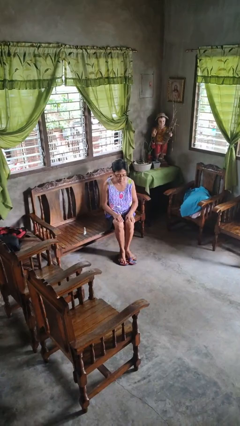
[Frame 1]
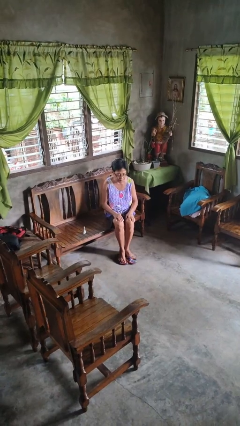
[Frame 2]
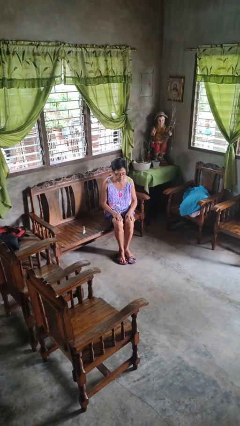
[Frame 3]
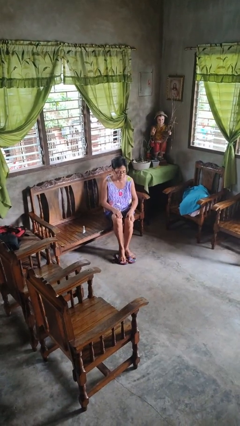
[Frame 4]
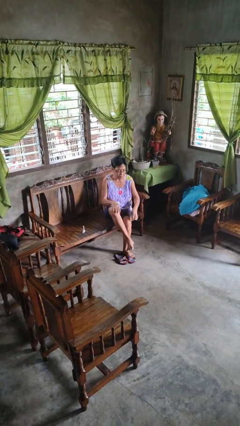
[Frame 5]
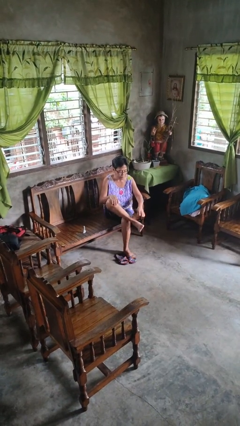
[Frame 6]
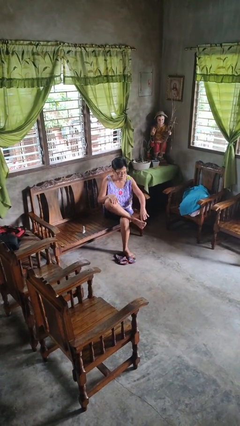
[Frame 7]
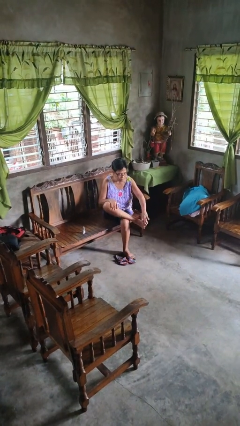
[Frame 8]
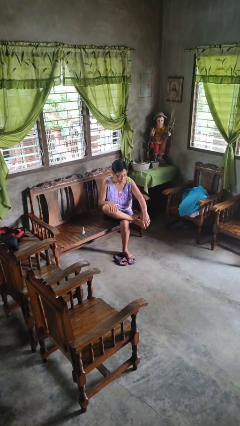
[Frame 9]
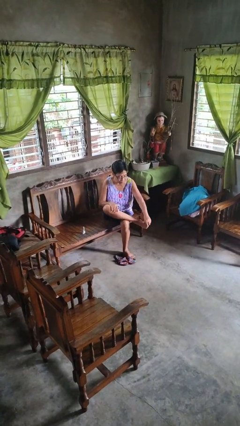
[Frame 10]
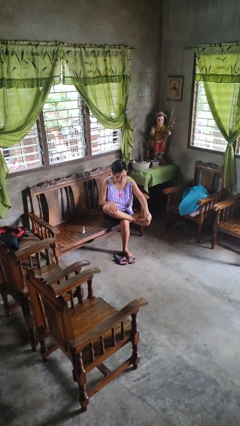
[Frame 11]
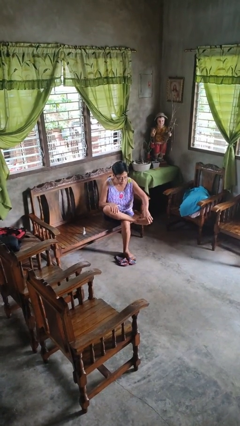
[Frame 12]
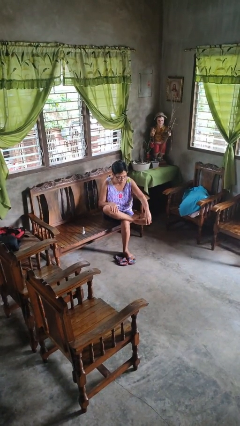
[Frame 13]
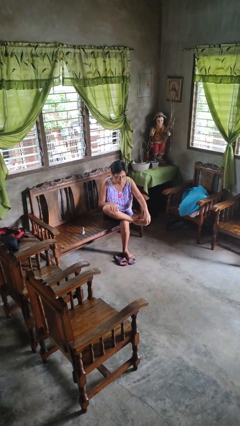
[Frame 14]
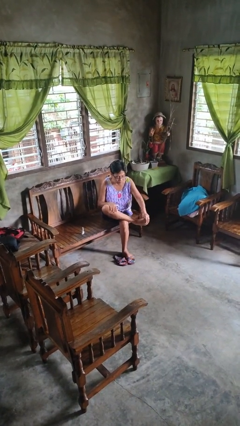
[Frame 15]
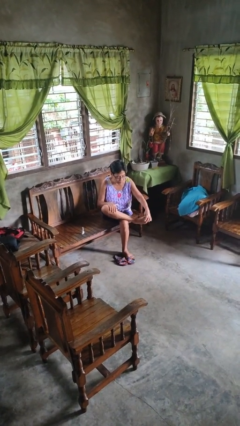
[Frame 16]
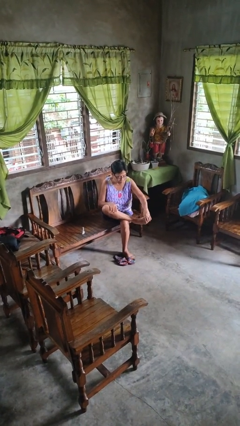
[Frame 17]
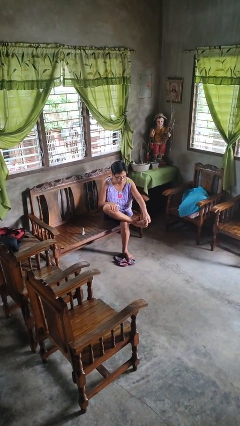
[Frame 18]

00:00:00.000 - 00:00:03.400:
person rubs foot

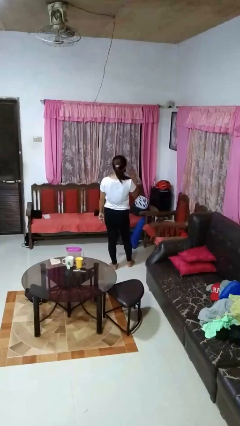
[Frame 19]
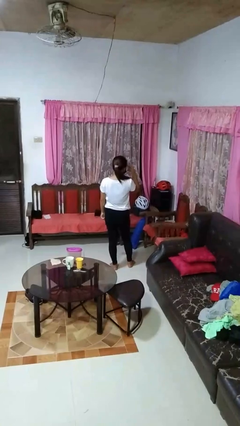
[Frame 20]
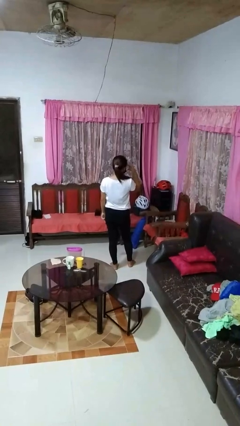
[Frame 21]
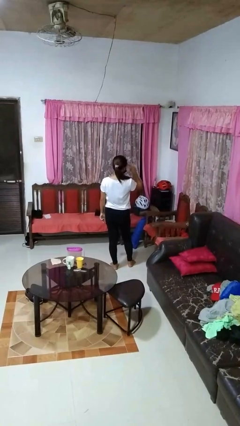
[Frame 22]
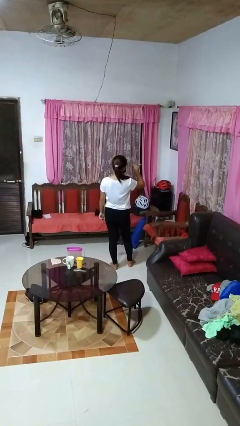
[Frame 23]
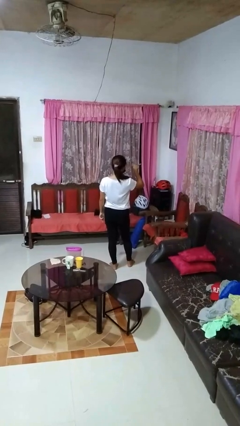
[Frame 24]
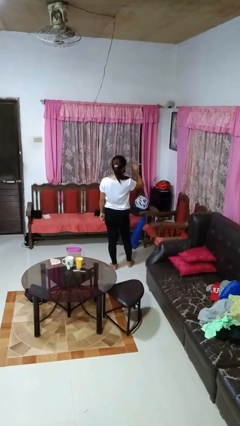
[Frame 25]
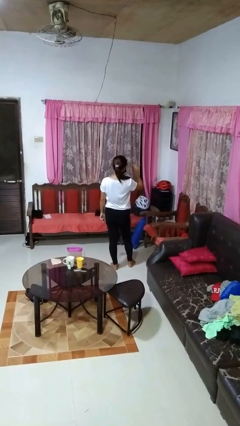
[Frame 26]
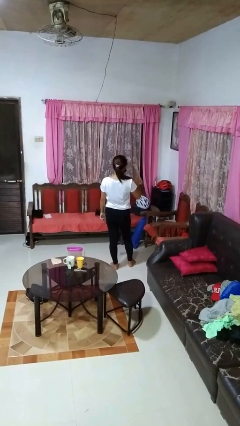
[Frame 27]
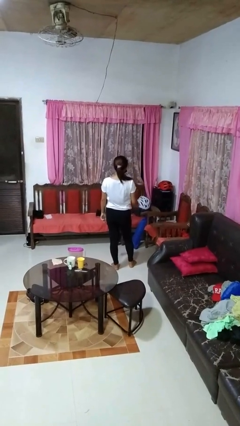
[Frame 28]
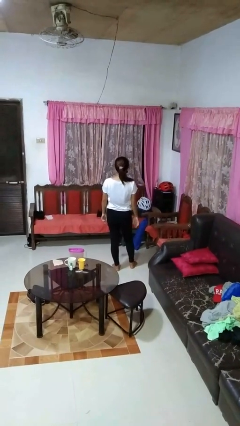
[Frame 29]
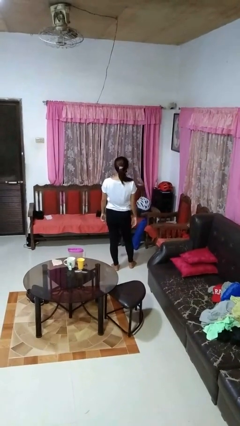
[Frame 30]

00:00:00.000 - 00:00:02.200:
person gestures watch closely

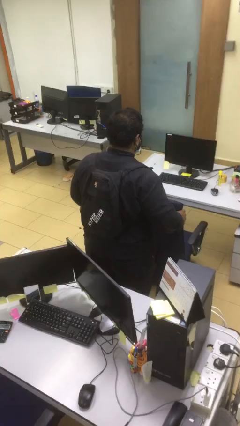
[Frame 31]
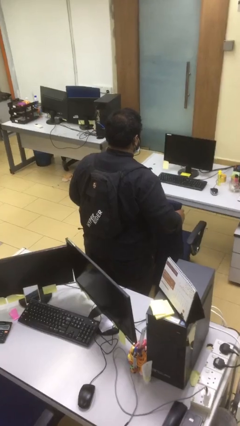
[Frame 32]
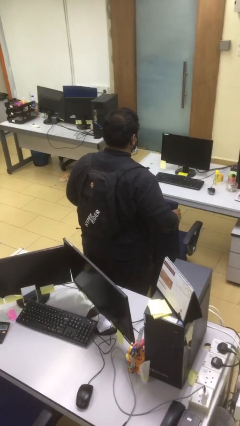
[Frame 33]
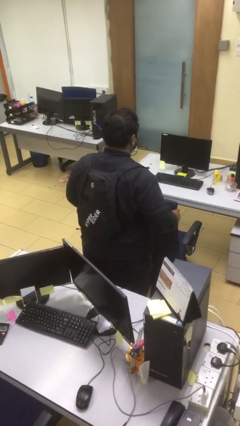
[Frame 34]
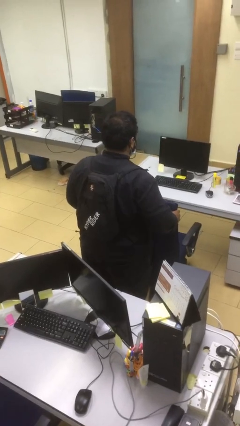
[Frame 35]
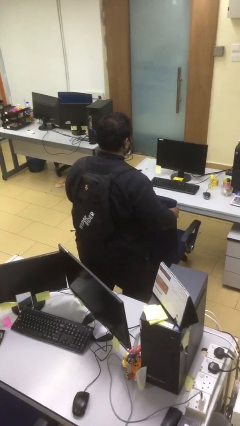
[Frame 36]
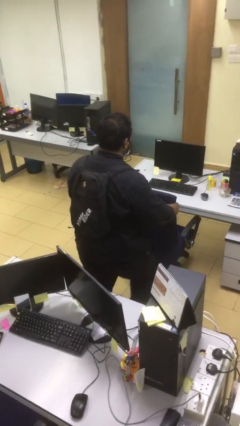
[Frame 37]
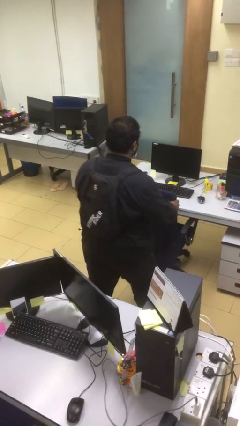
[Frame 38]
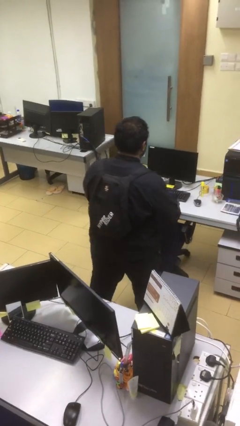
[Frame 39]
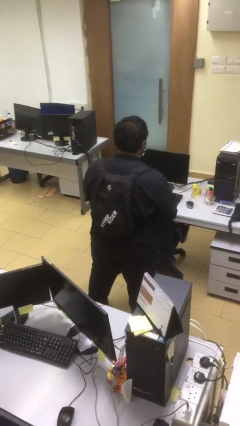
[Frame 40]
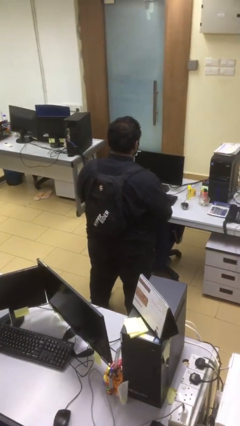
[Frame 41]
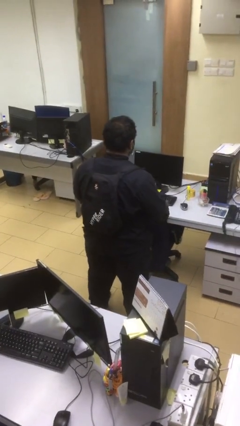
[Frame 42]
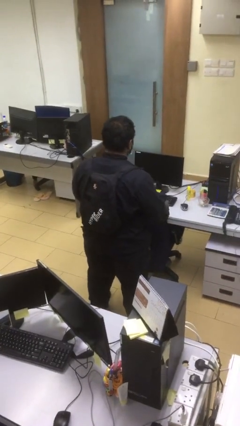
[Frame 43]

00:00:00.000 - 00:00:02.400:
person pushes in chair

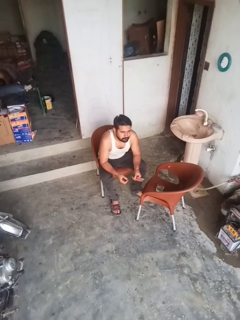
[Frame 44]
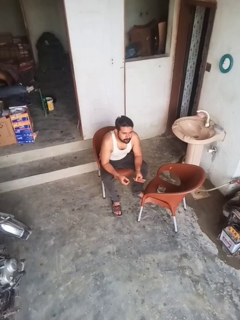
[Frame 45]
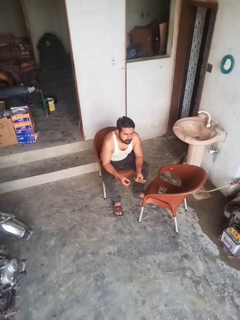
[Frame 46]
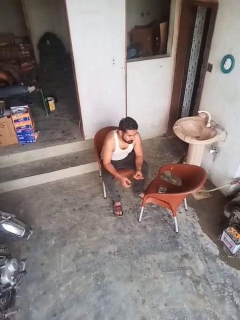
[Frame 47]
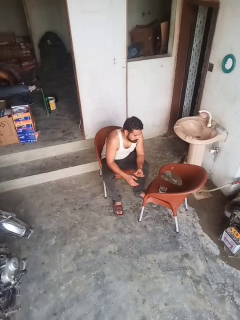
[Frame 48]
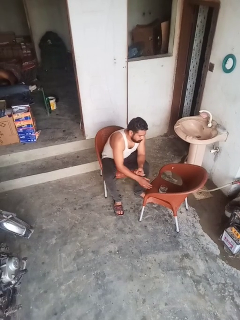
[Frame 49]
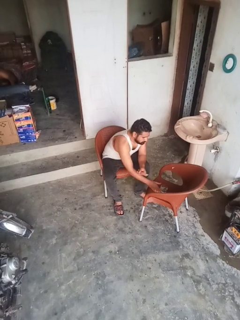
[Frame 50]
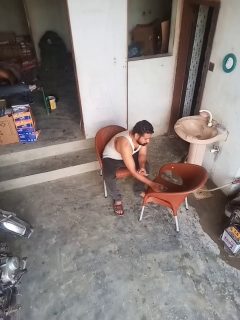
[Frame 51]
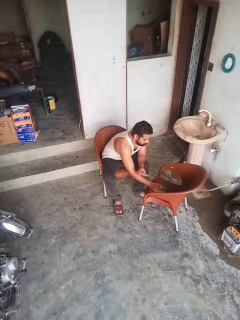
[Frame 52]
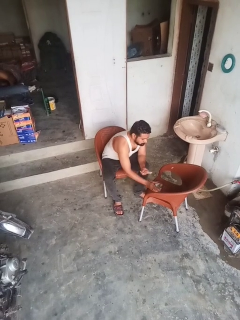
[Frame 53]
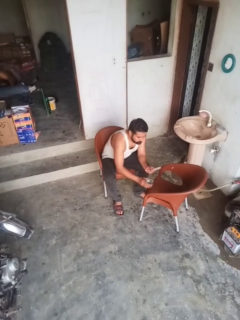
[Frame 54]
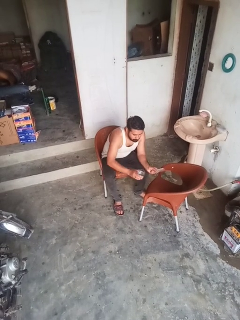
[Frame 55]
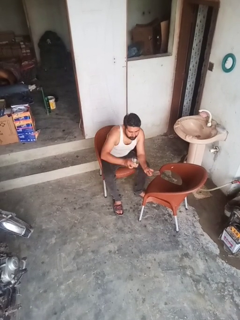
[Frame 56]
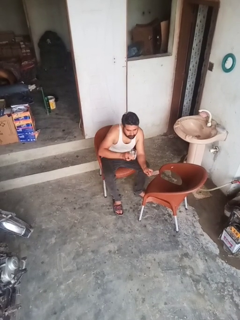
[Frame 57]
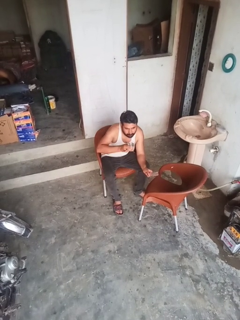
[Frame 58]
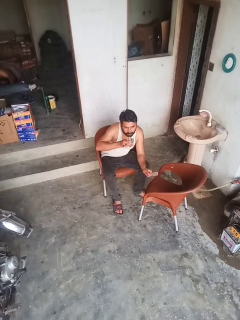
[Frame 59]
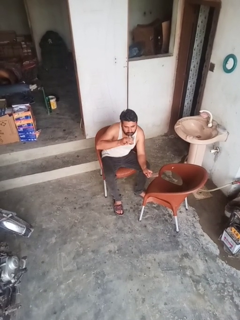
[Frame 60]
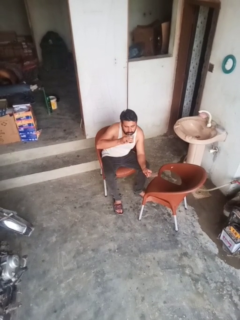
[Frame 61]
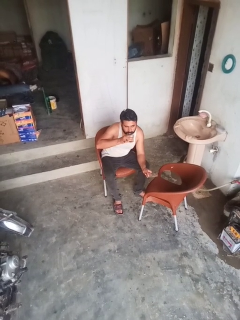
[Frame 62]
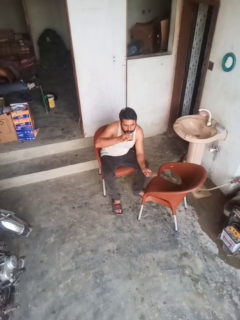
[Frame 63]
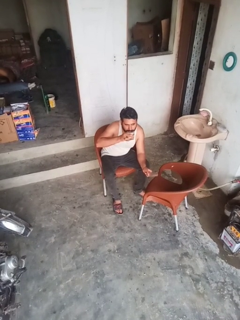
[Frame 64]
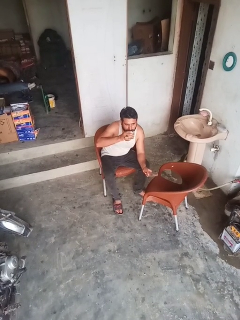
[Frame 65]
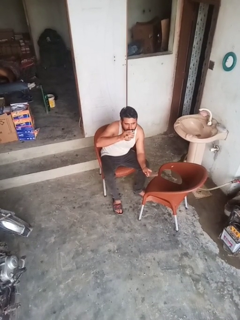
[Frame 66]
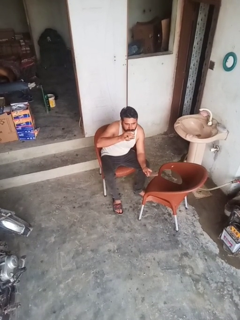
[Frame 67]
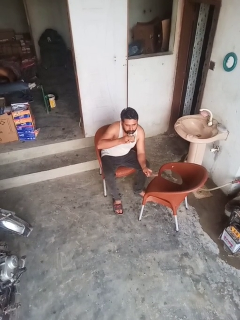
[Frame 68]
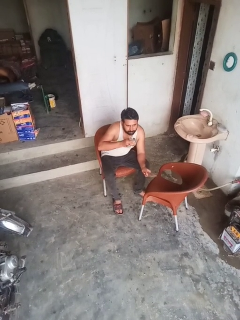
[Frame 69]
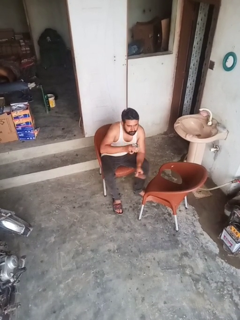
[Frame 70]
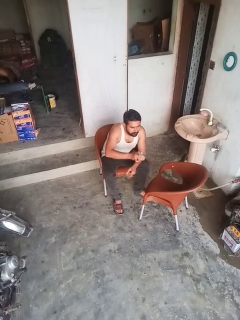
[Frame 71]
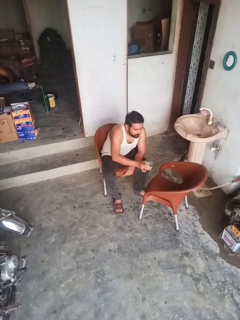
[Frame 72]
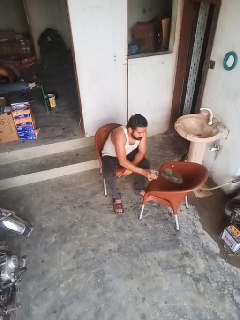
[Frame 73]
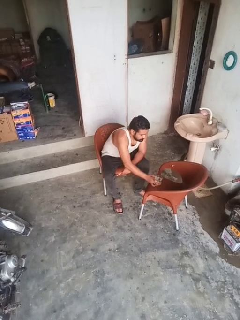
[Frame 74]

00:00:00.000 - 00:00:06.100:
person drinks from cup

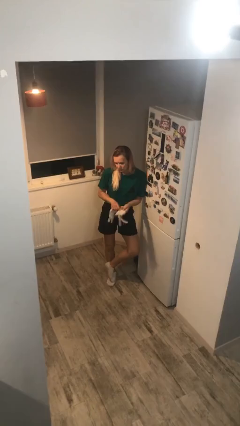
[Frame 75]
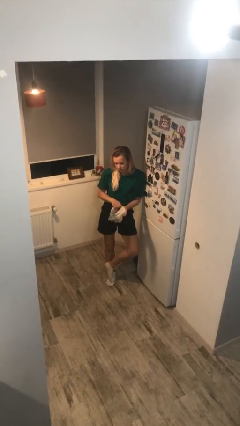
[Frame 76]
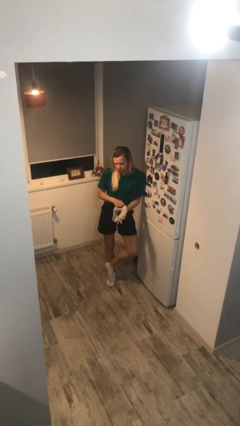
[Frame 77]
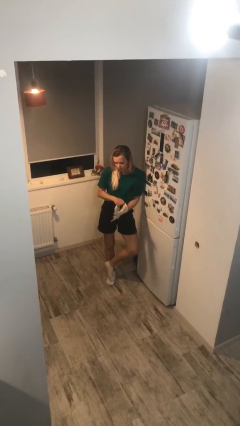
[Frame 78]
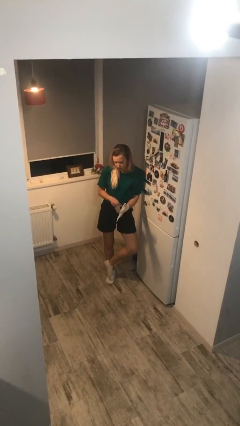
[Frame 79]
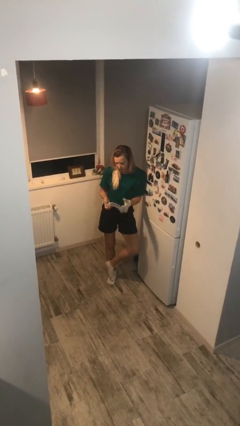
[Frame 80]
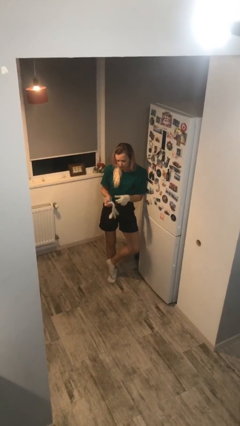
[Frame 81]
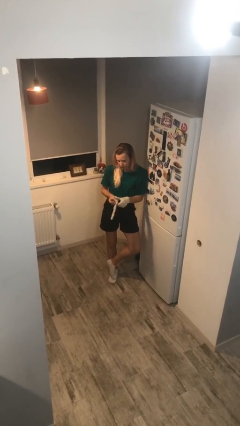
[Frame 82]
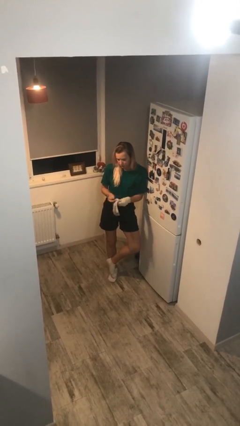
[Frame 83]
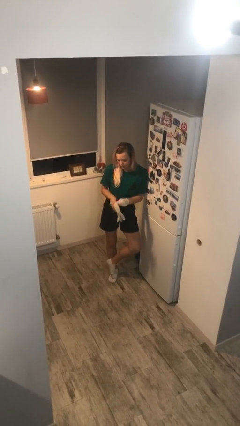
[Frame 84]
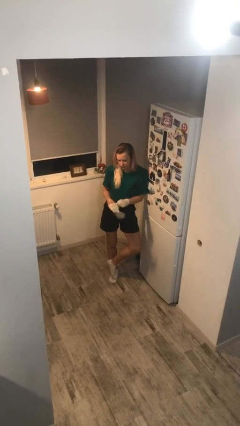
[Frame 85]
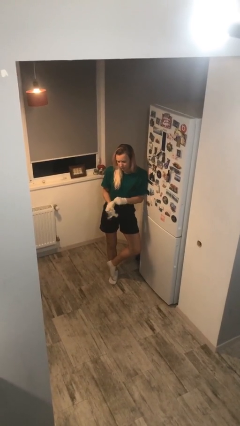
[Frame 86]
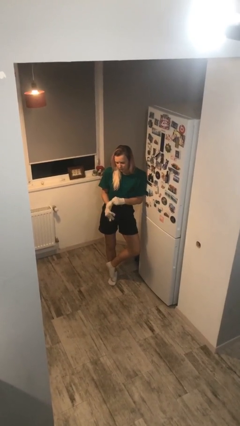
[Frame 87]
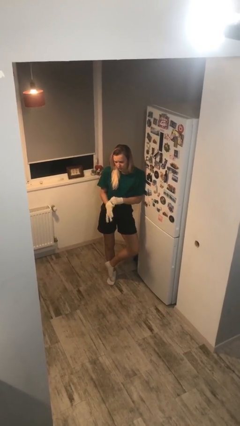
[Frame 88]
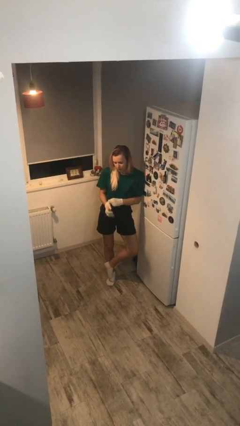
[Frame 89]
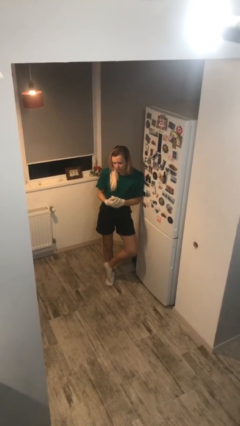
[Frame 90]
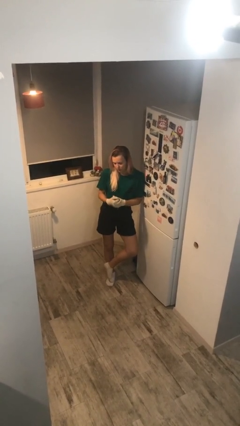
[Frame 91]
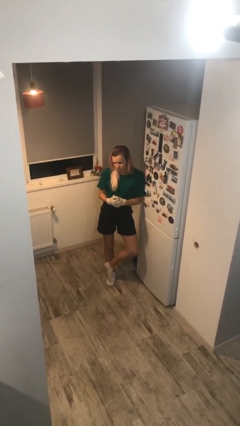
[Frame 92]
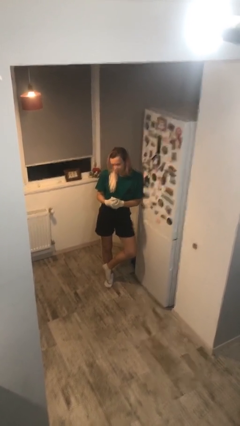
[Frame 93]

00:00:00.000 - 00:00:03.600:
person puts on gloves

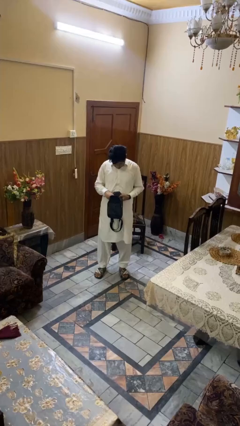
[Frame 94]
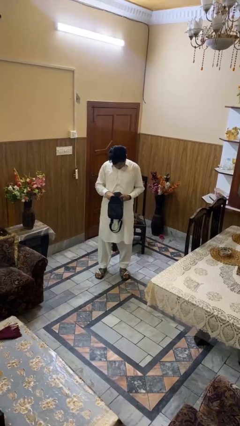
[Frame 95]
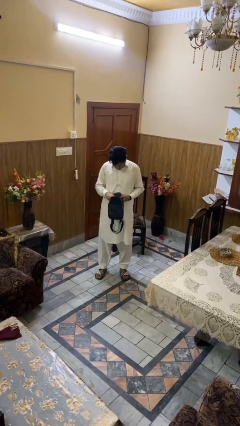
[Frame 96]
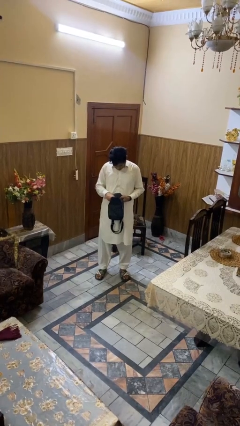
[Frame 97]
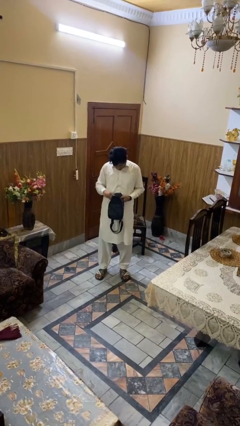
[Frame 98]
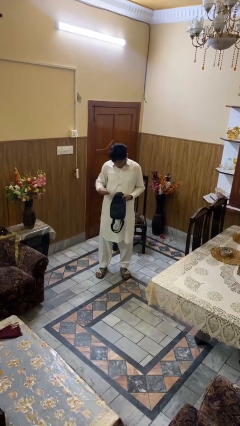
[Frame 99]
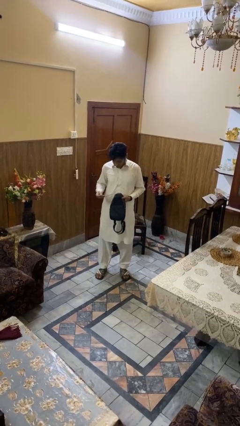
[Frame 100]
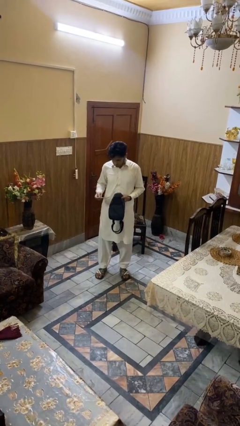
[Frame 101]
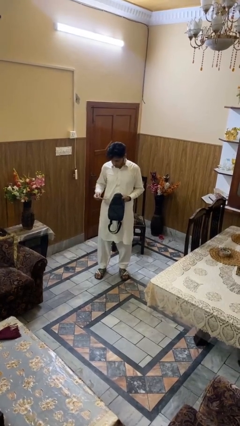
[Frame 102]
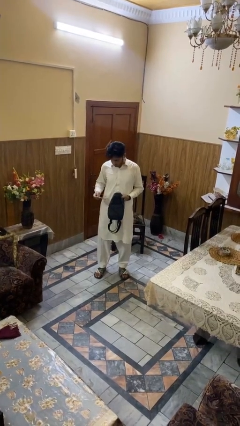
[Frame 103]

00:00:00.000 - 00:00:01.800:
person takes object from purse
